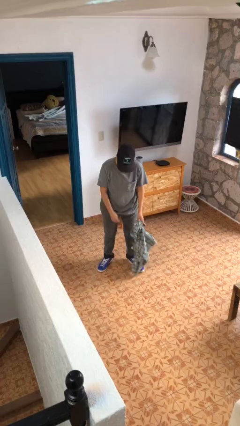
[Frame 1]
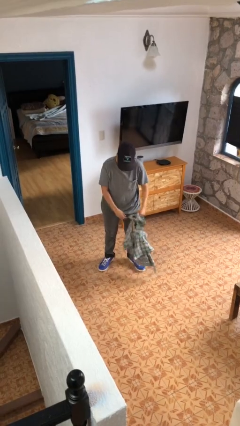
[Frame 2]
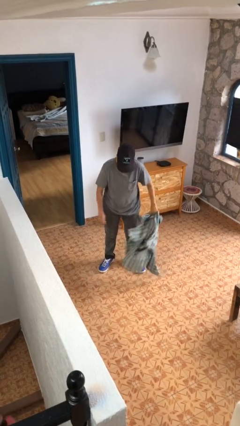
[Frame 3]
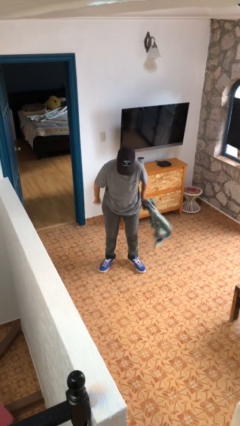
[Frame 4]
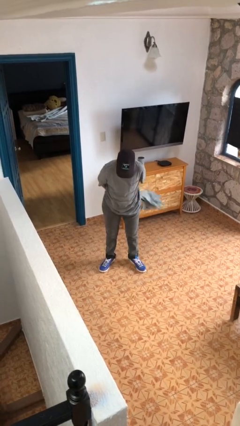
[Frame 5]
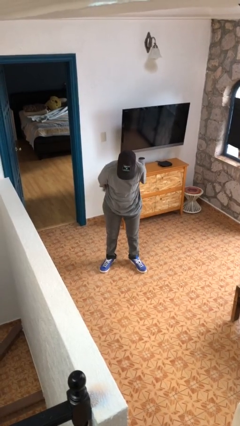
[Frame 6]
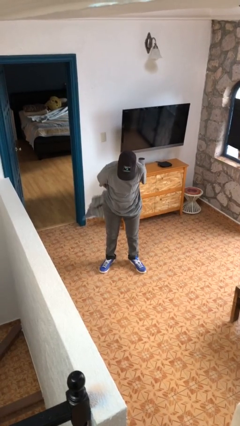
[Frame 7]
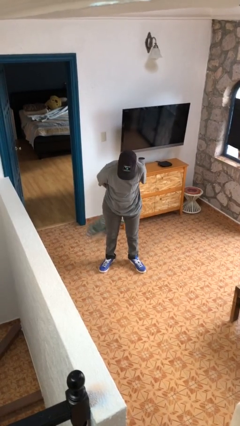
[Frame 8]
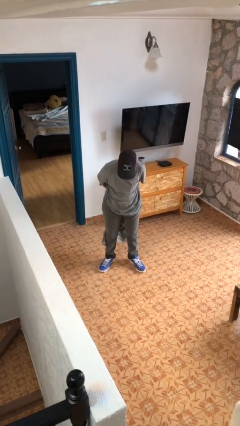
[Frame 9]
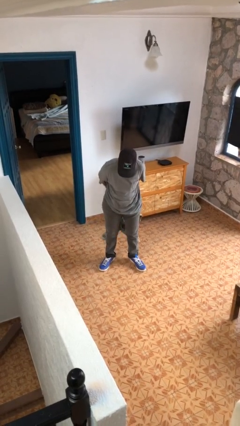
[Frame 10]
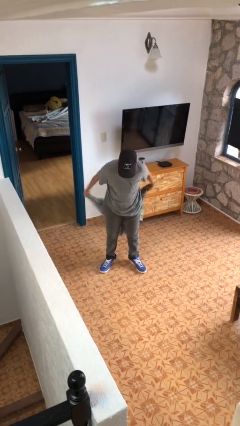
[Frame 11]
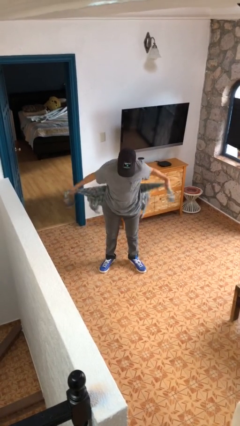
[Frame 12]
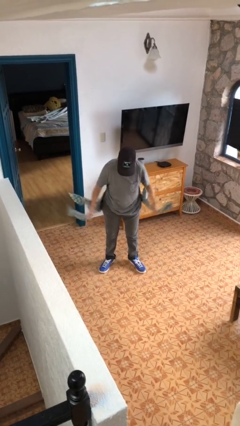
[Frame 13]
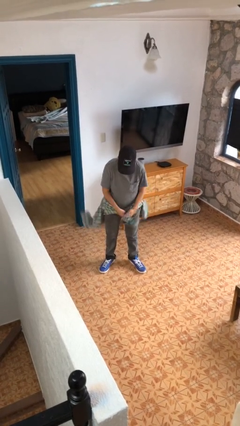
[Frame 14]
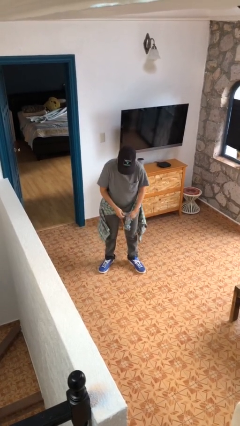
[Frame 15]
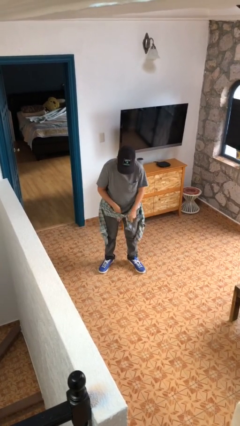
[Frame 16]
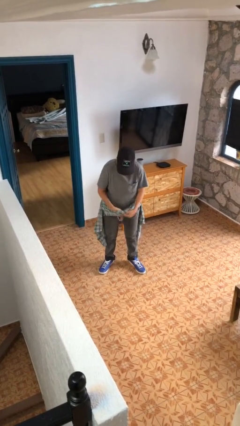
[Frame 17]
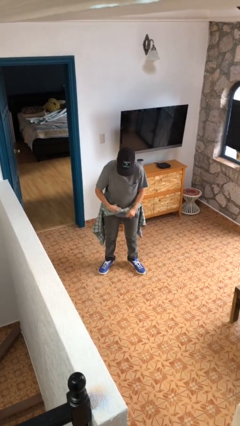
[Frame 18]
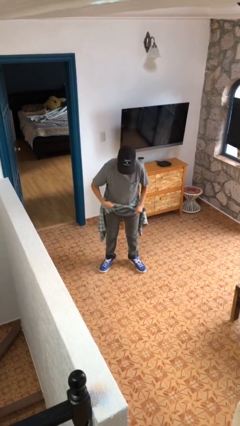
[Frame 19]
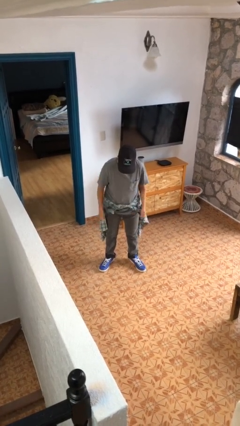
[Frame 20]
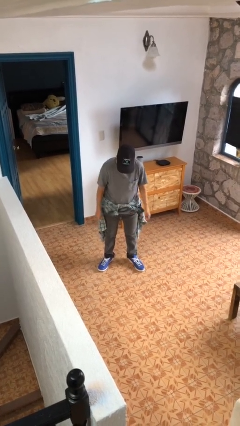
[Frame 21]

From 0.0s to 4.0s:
person ties jacket around waist

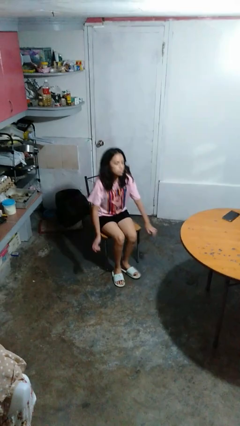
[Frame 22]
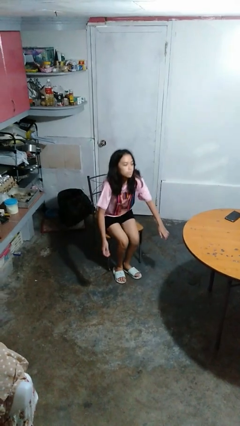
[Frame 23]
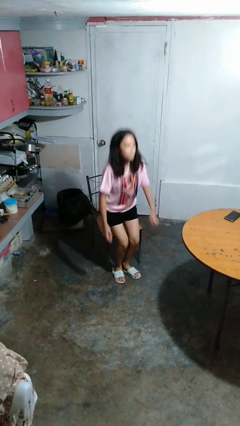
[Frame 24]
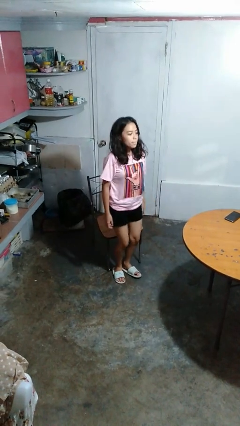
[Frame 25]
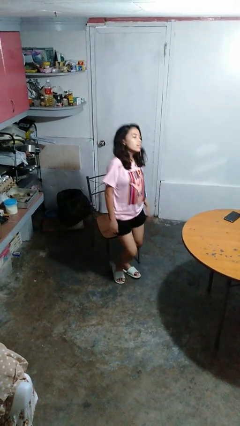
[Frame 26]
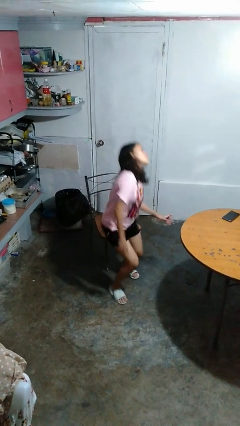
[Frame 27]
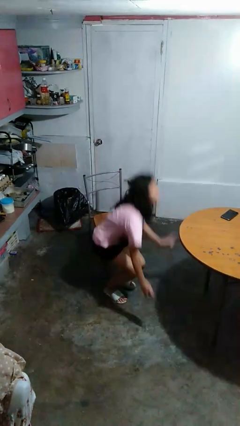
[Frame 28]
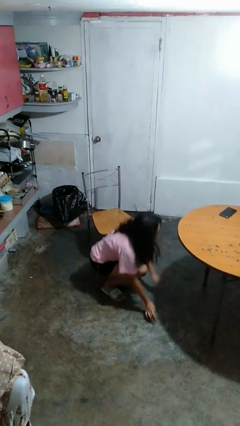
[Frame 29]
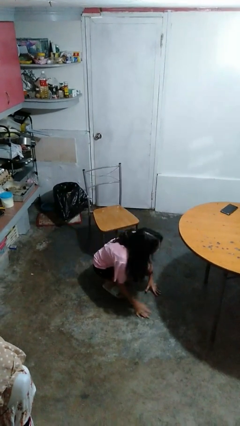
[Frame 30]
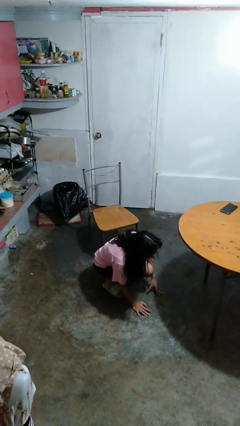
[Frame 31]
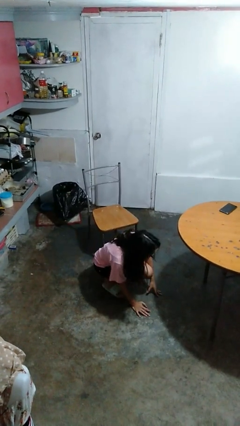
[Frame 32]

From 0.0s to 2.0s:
person falls from chair

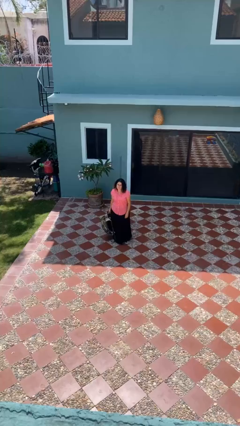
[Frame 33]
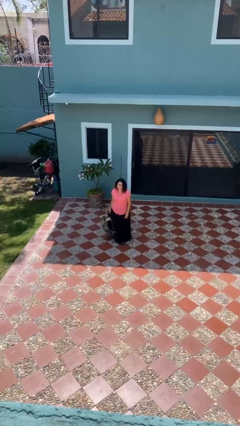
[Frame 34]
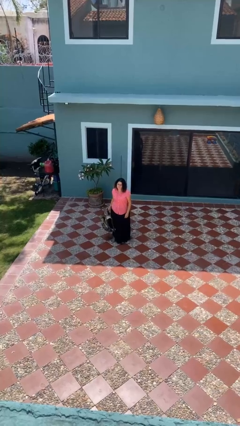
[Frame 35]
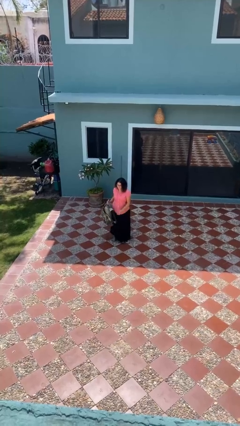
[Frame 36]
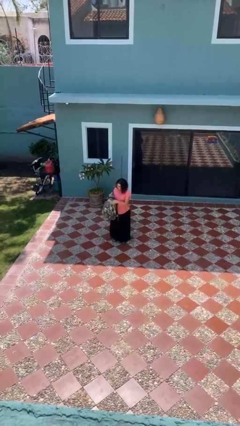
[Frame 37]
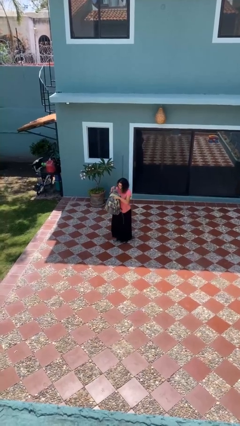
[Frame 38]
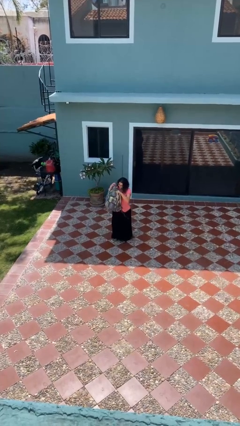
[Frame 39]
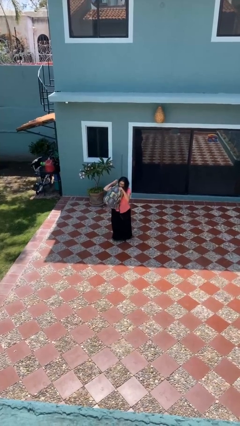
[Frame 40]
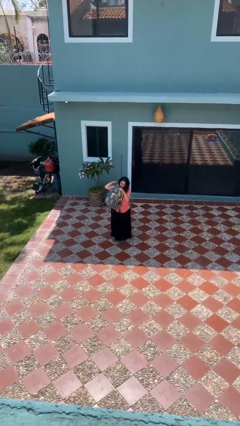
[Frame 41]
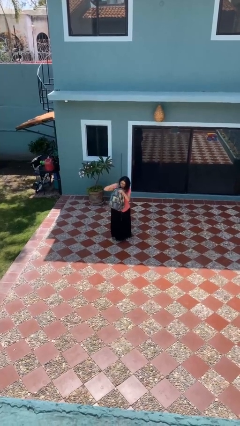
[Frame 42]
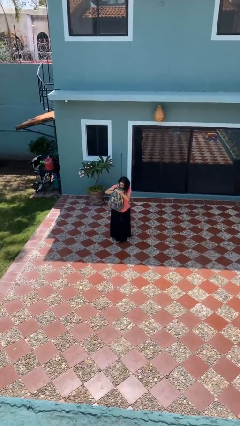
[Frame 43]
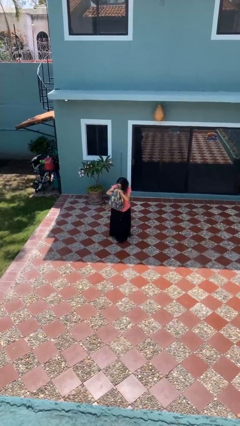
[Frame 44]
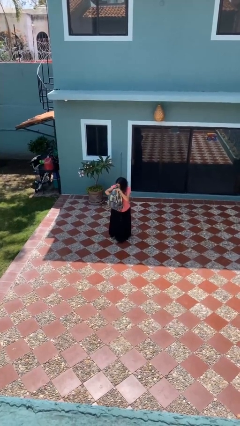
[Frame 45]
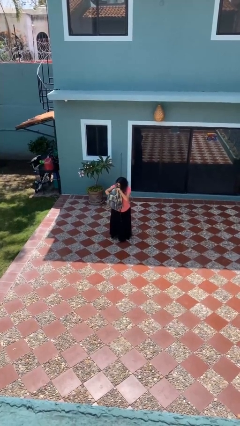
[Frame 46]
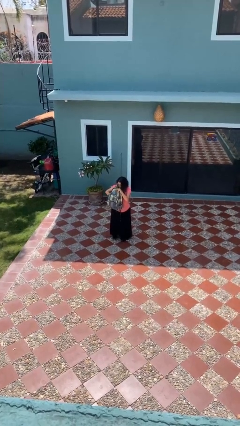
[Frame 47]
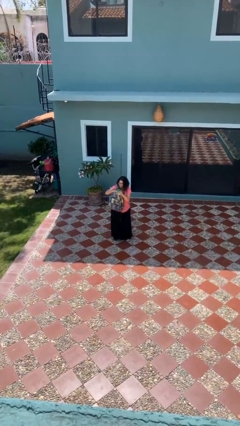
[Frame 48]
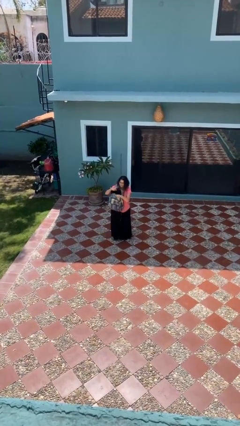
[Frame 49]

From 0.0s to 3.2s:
person searches in backpack

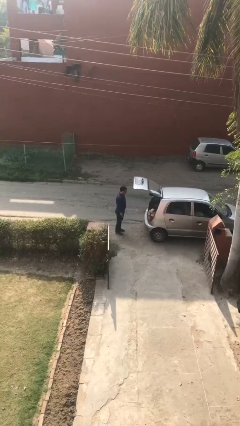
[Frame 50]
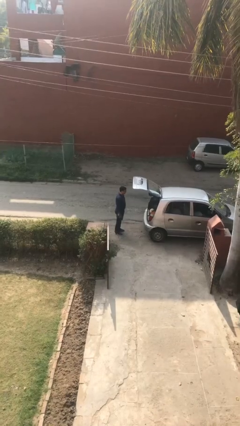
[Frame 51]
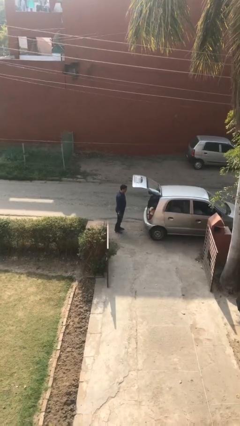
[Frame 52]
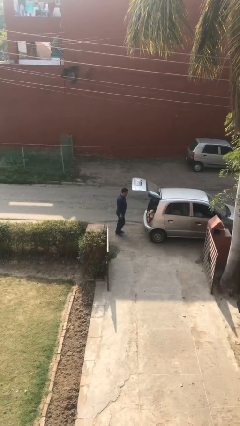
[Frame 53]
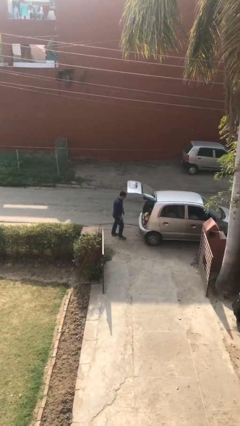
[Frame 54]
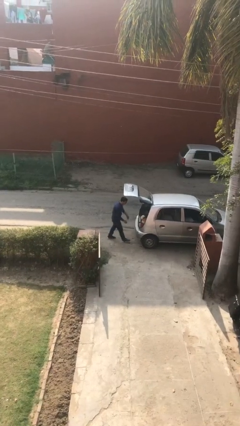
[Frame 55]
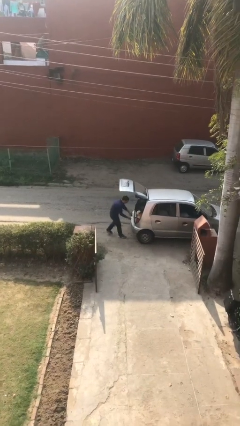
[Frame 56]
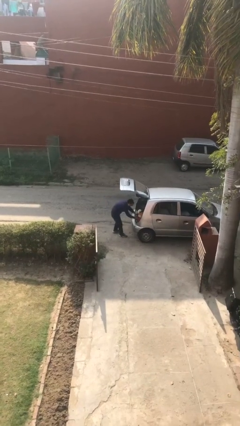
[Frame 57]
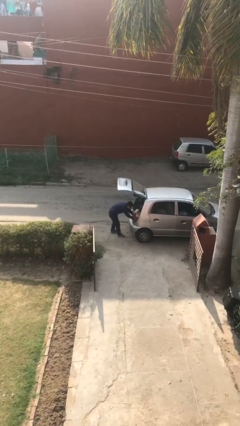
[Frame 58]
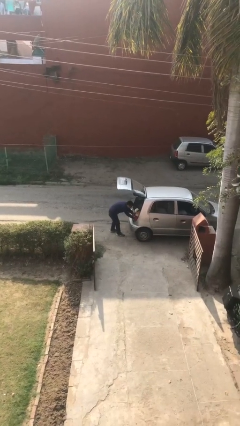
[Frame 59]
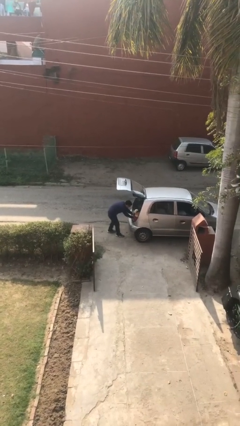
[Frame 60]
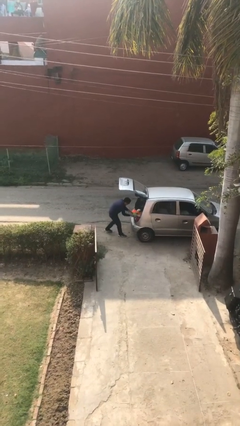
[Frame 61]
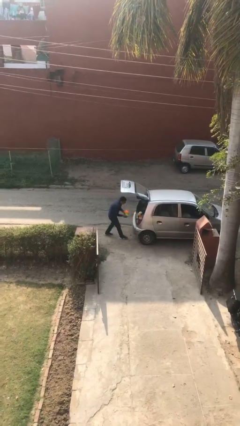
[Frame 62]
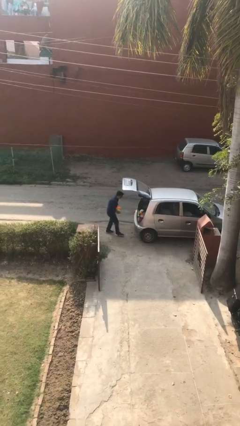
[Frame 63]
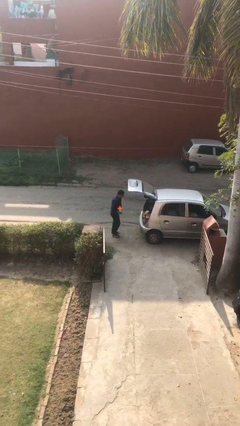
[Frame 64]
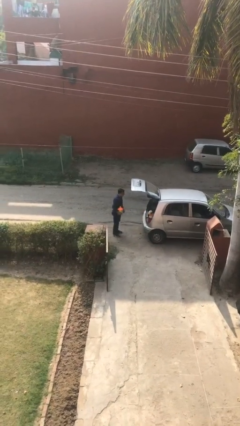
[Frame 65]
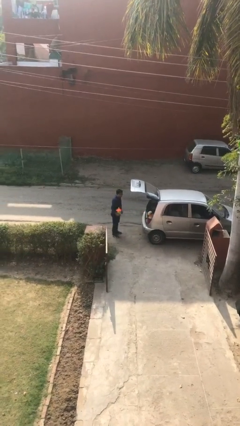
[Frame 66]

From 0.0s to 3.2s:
person unloads car

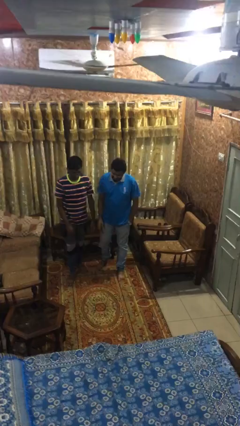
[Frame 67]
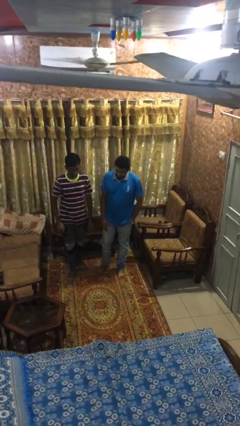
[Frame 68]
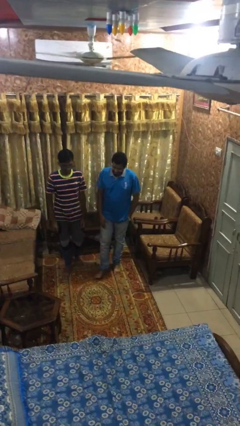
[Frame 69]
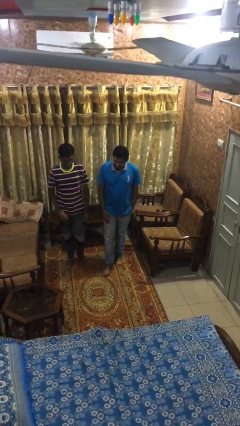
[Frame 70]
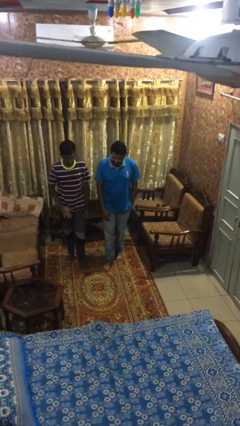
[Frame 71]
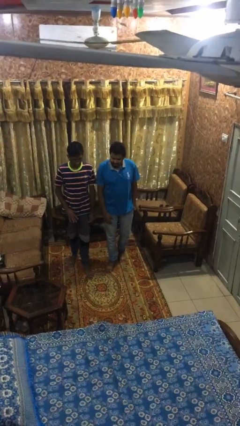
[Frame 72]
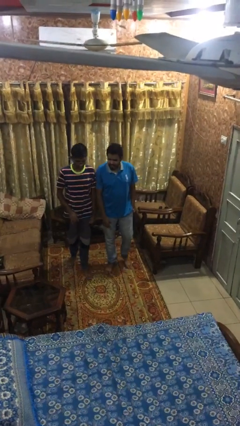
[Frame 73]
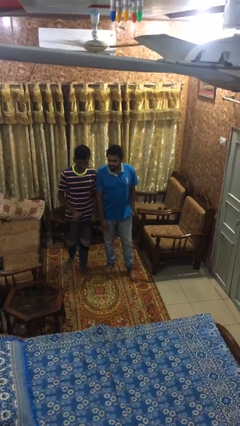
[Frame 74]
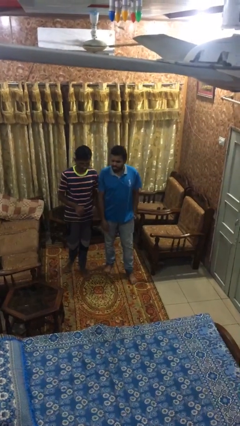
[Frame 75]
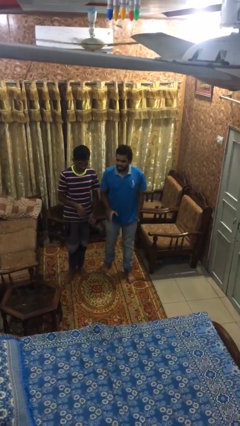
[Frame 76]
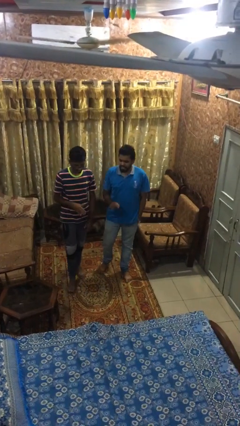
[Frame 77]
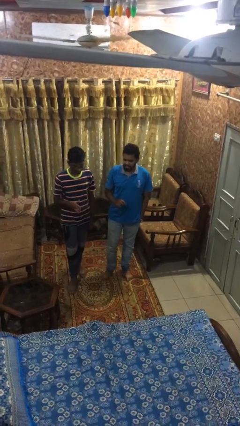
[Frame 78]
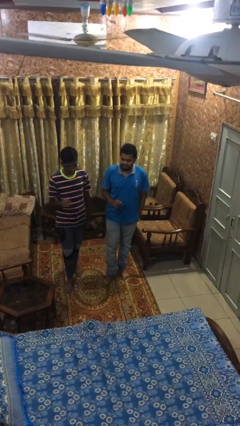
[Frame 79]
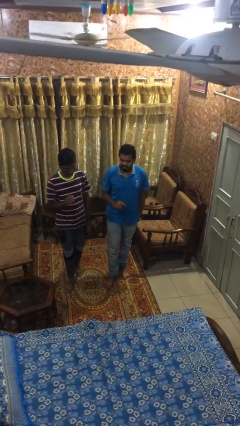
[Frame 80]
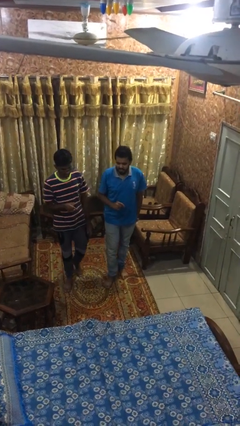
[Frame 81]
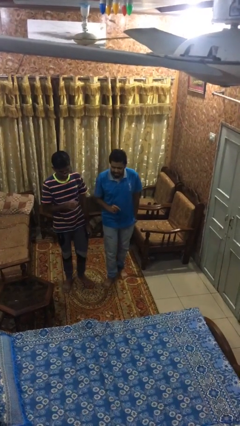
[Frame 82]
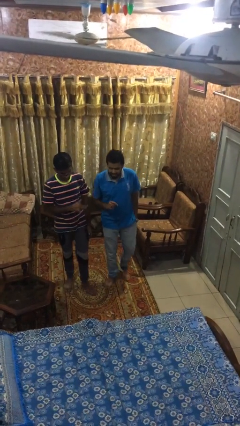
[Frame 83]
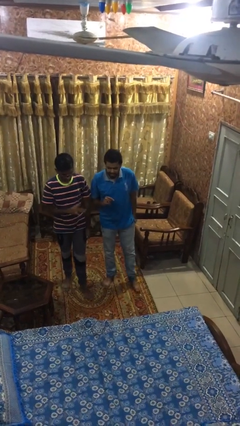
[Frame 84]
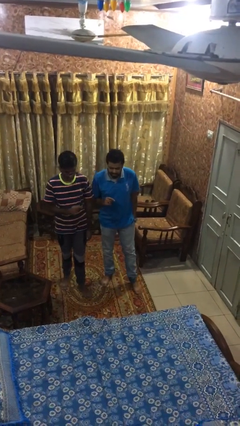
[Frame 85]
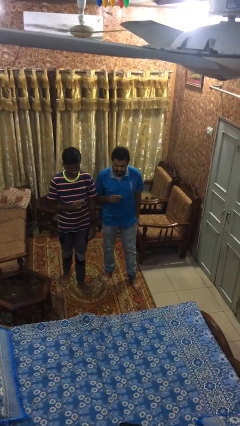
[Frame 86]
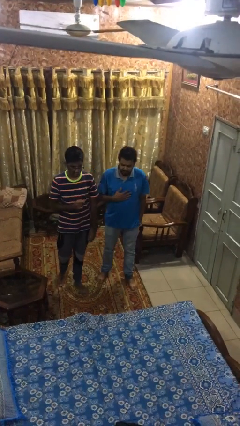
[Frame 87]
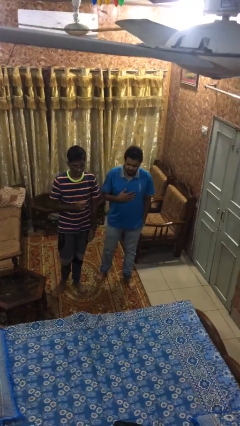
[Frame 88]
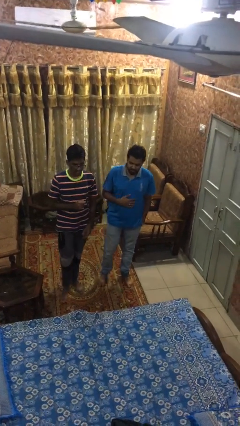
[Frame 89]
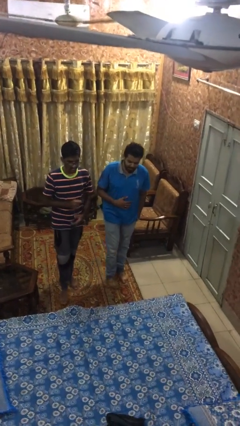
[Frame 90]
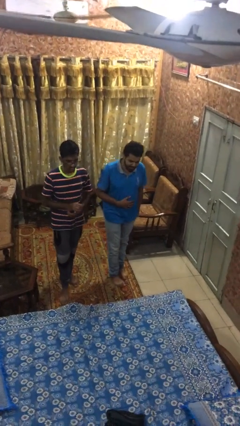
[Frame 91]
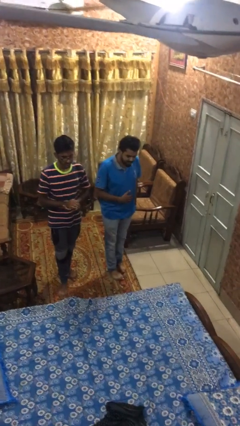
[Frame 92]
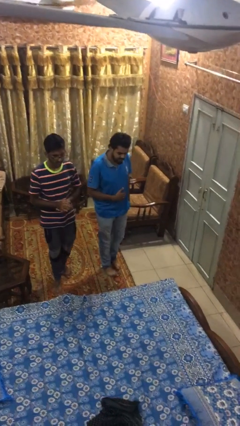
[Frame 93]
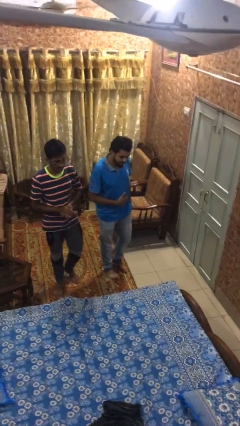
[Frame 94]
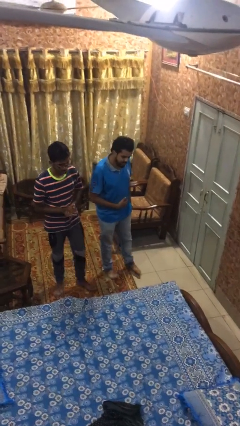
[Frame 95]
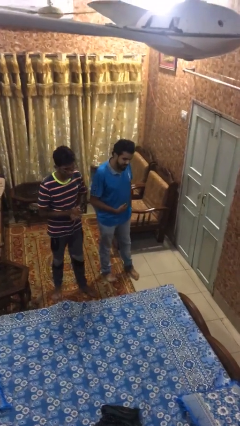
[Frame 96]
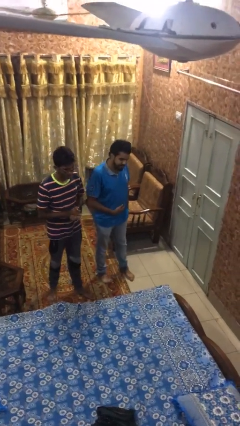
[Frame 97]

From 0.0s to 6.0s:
person talks to person
